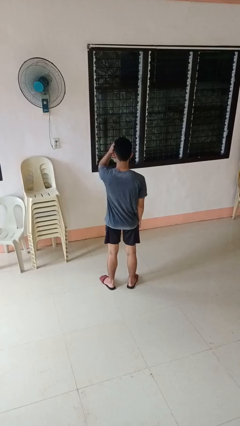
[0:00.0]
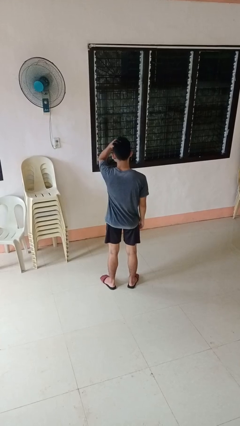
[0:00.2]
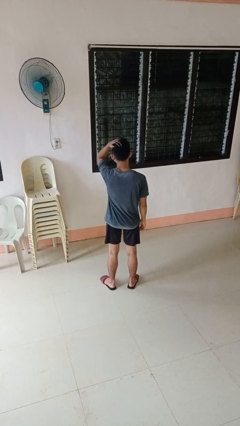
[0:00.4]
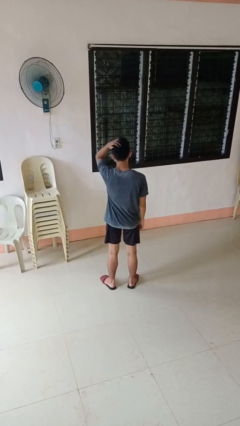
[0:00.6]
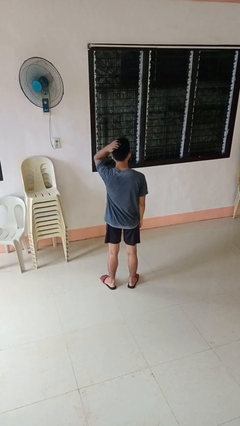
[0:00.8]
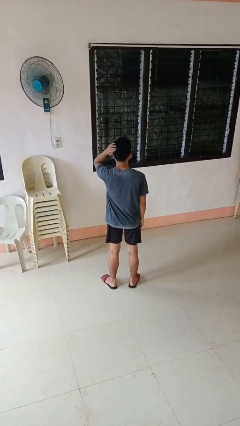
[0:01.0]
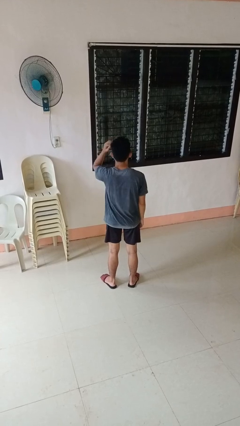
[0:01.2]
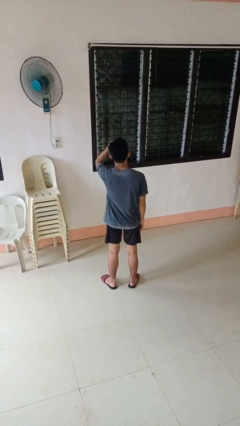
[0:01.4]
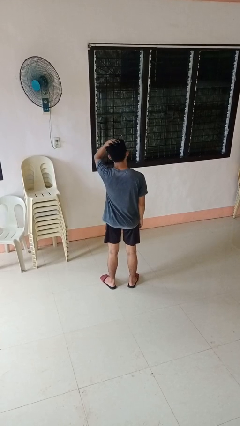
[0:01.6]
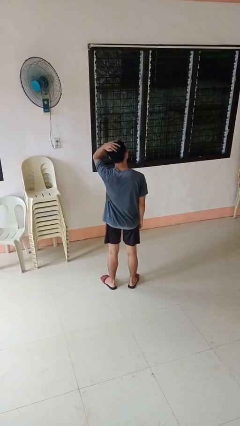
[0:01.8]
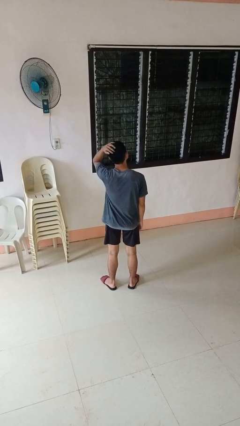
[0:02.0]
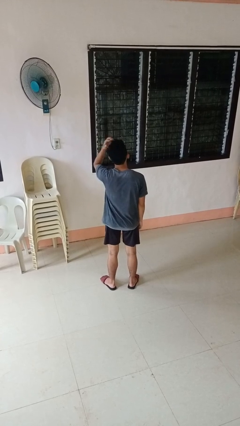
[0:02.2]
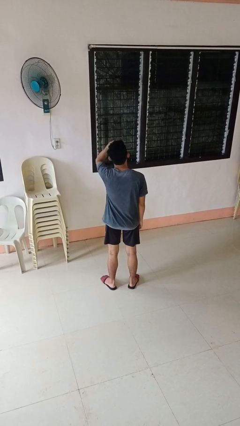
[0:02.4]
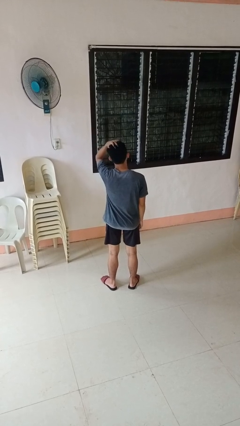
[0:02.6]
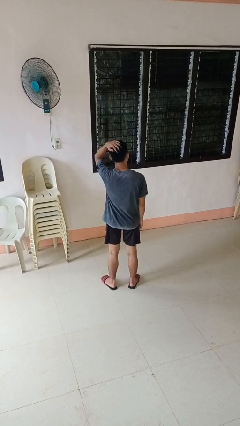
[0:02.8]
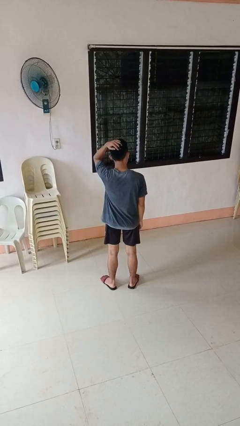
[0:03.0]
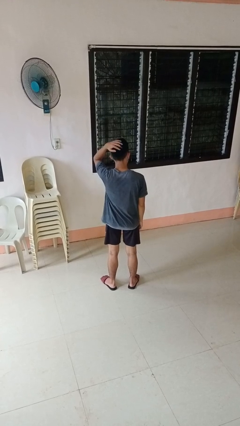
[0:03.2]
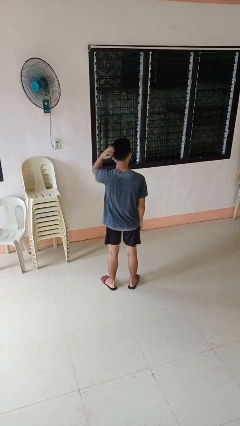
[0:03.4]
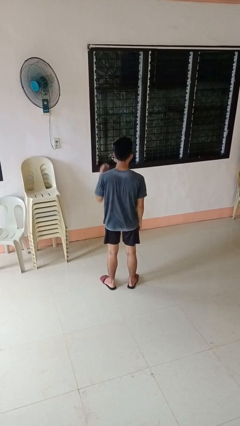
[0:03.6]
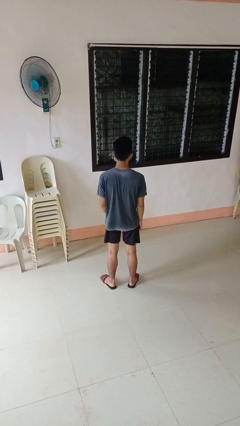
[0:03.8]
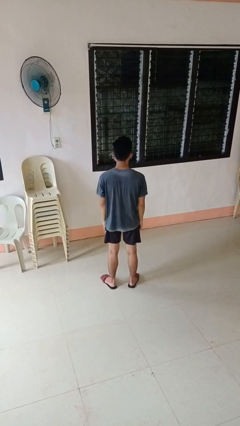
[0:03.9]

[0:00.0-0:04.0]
person strokes hair

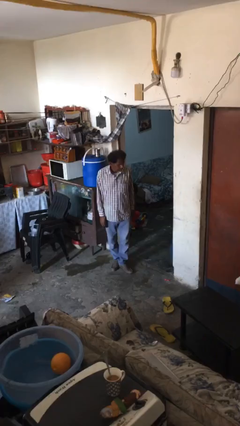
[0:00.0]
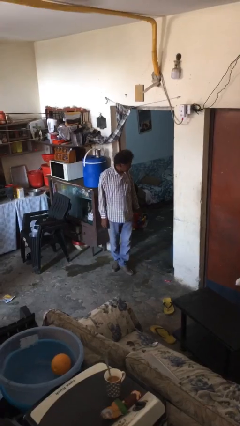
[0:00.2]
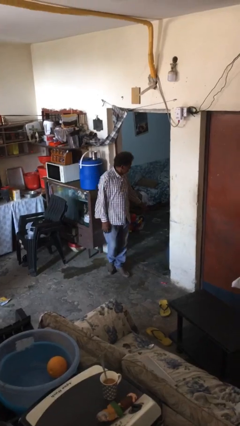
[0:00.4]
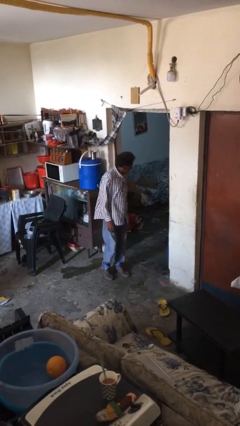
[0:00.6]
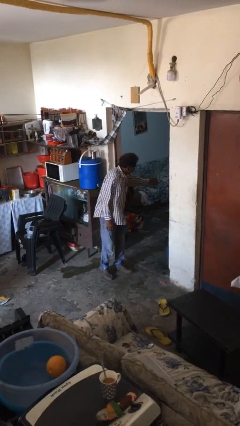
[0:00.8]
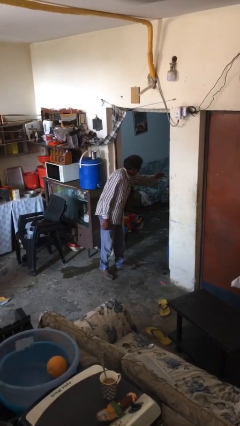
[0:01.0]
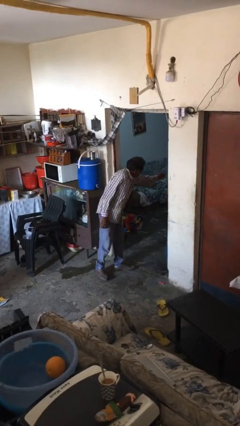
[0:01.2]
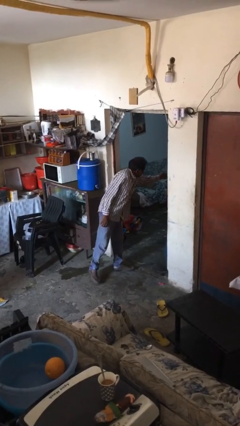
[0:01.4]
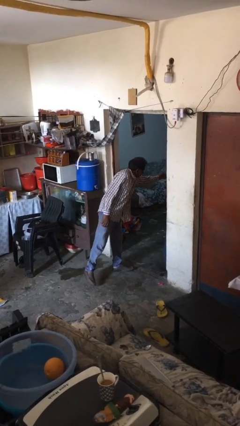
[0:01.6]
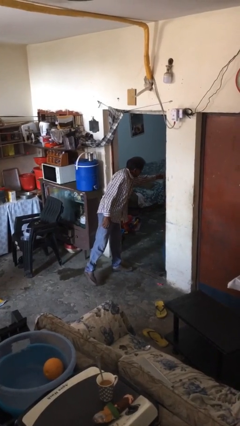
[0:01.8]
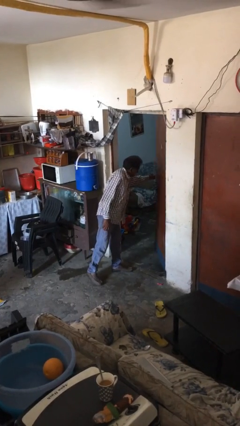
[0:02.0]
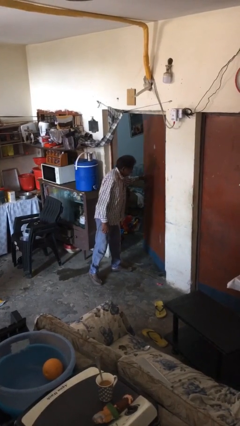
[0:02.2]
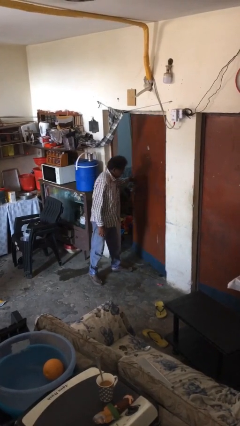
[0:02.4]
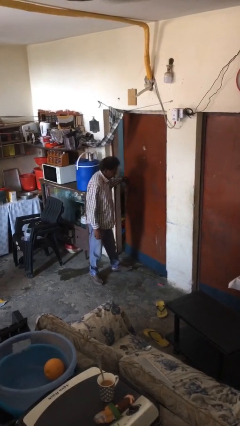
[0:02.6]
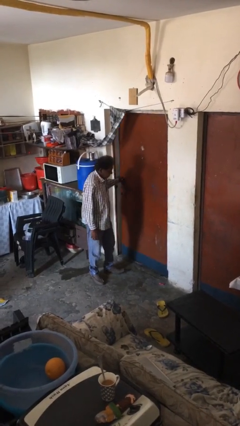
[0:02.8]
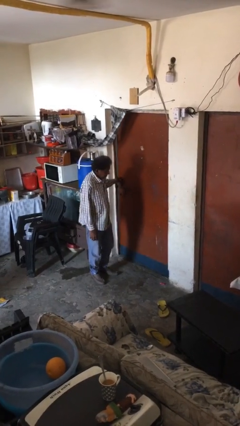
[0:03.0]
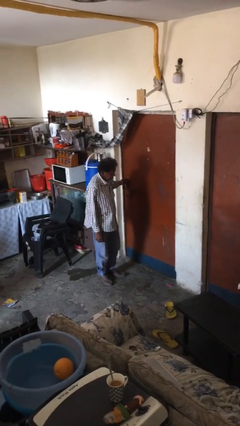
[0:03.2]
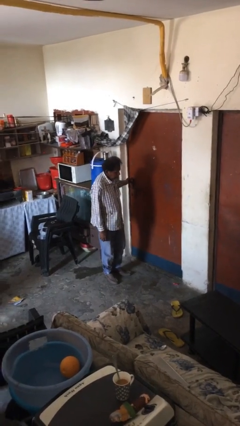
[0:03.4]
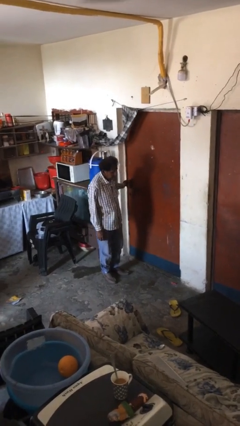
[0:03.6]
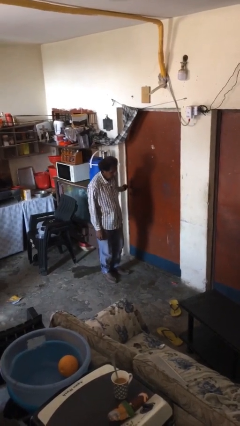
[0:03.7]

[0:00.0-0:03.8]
person closes facility door

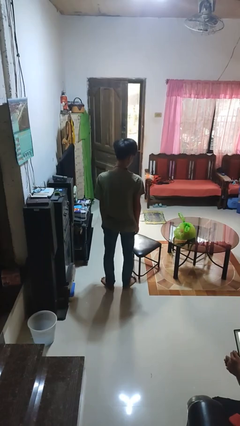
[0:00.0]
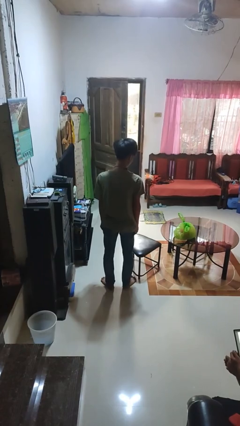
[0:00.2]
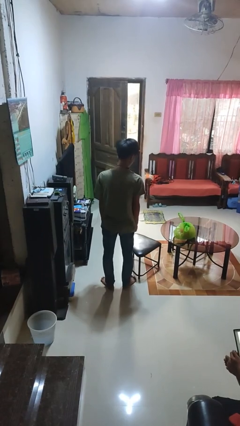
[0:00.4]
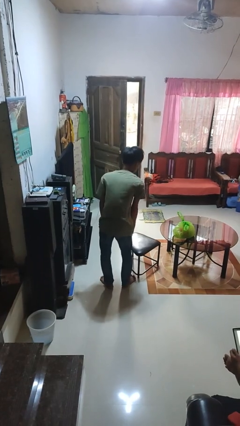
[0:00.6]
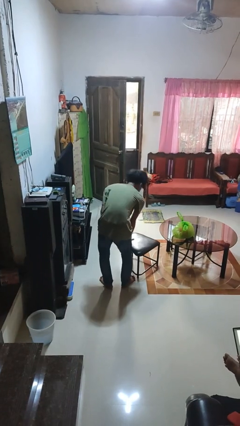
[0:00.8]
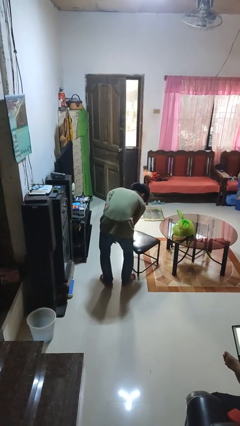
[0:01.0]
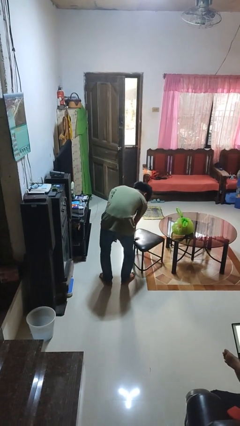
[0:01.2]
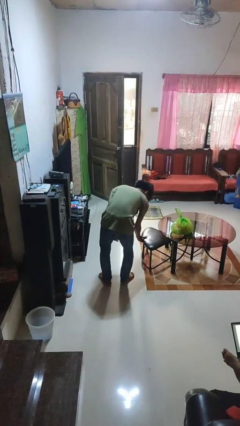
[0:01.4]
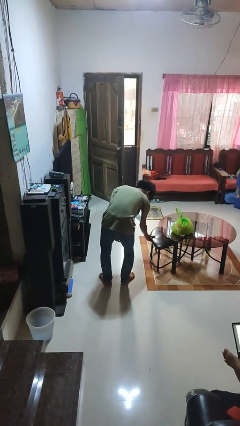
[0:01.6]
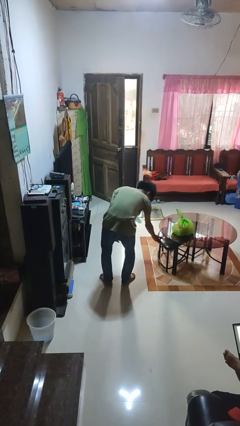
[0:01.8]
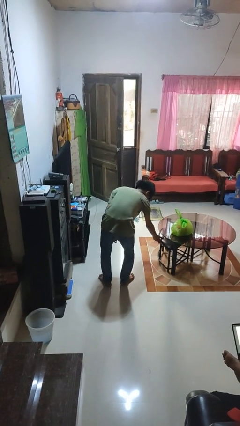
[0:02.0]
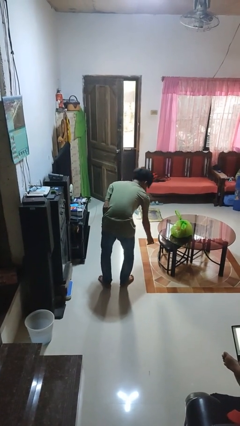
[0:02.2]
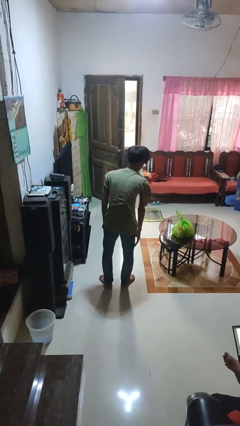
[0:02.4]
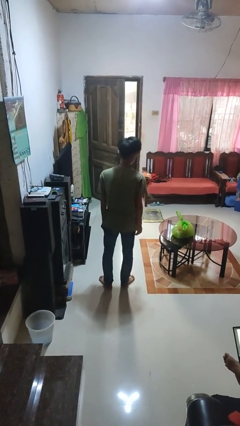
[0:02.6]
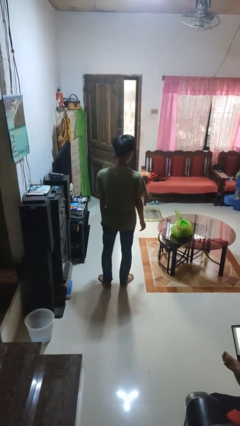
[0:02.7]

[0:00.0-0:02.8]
person pushes in chair

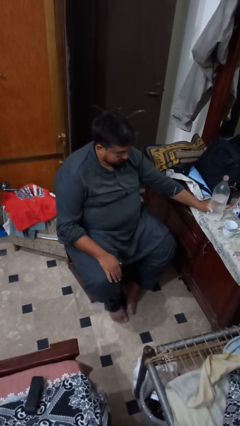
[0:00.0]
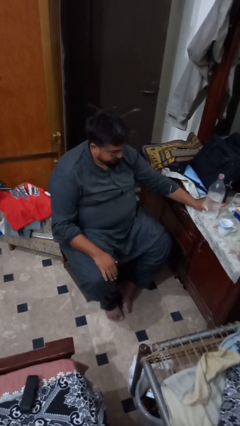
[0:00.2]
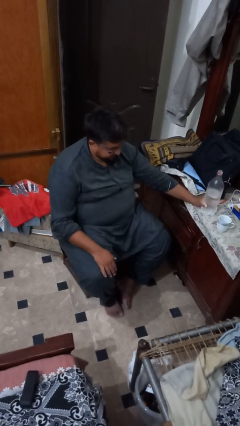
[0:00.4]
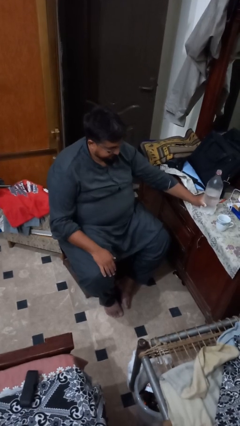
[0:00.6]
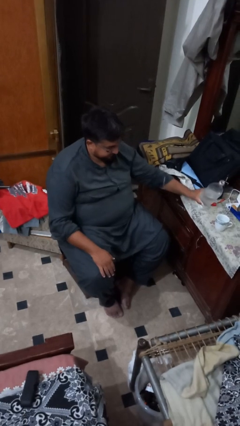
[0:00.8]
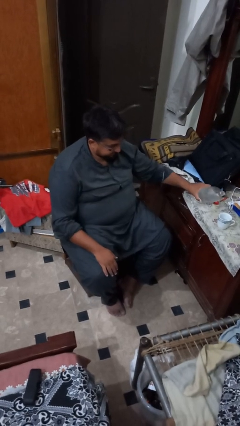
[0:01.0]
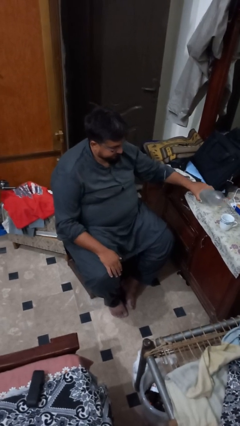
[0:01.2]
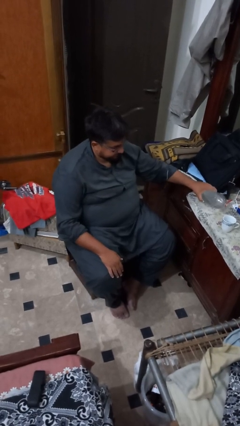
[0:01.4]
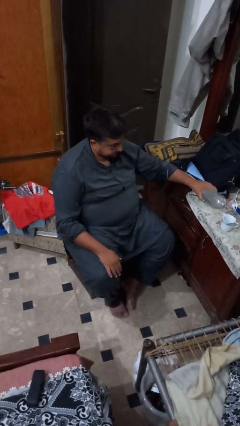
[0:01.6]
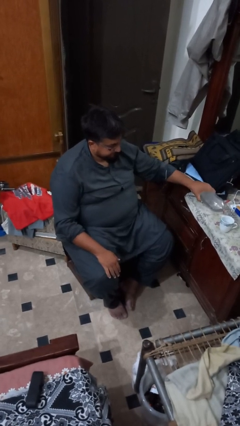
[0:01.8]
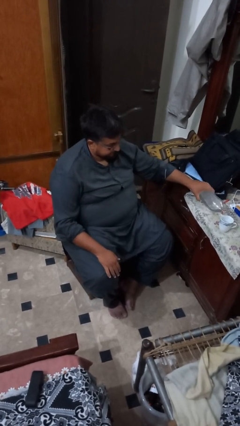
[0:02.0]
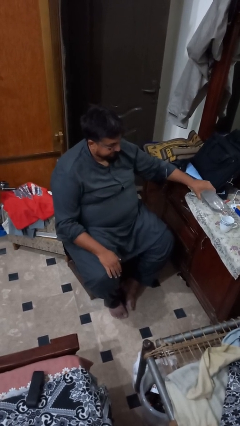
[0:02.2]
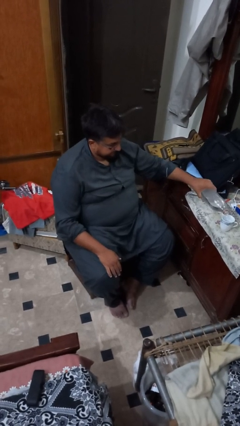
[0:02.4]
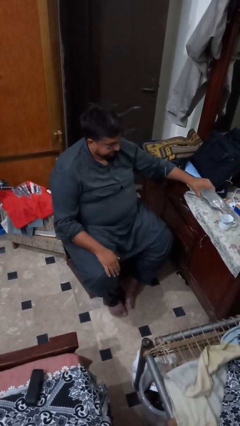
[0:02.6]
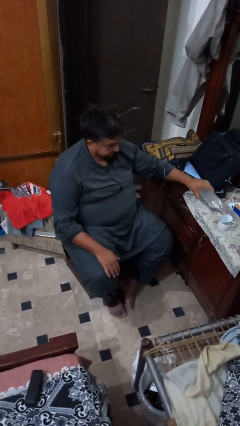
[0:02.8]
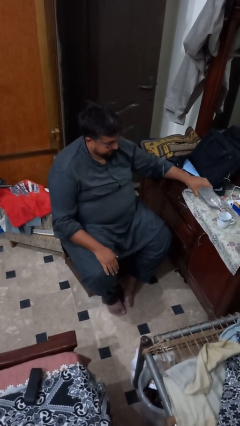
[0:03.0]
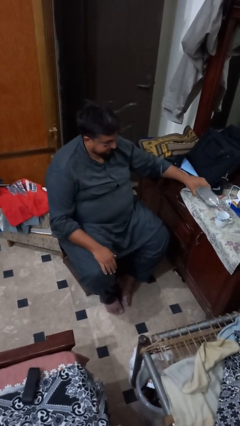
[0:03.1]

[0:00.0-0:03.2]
person pours liquid into cup

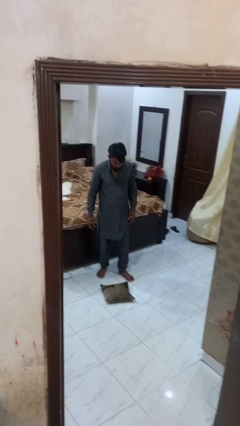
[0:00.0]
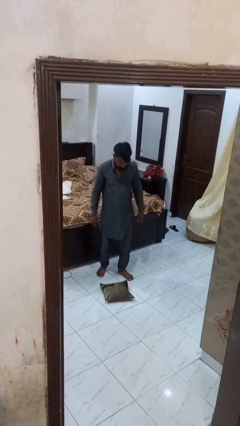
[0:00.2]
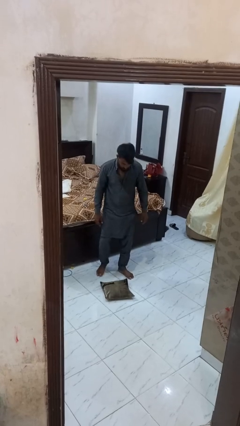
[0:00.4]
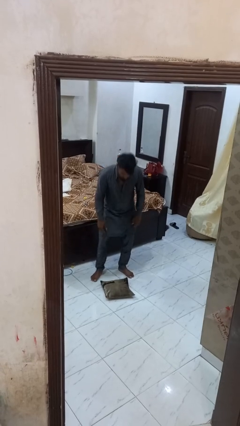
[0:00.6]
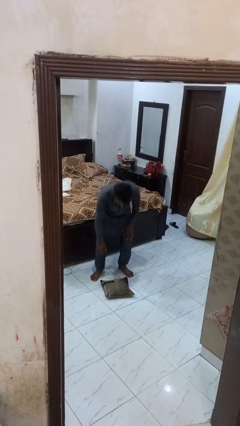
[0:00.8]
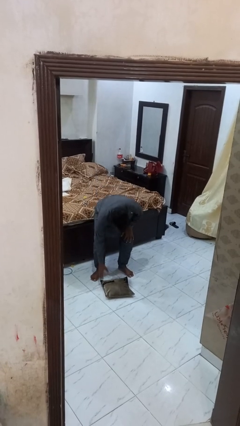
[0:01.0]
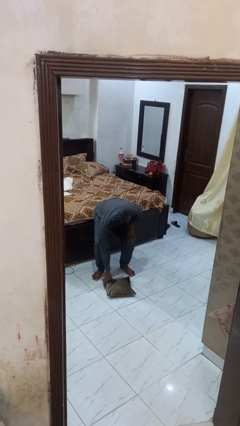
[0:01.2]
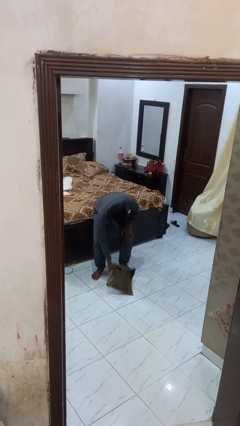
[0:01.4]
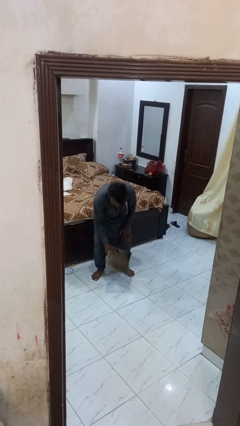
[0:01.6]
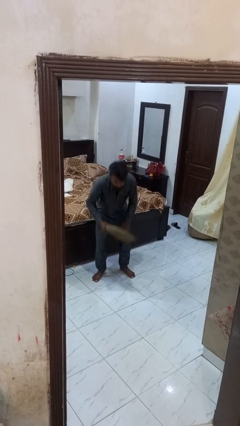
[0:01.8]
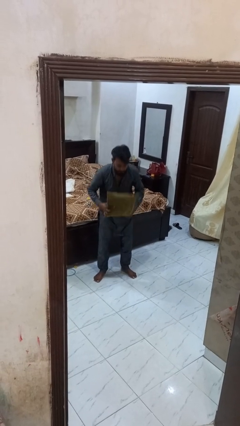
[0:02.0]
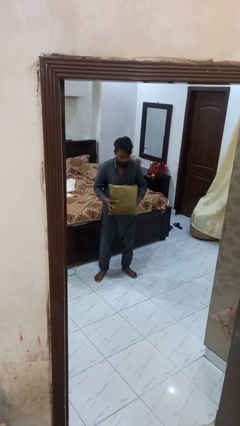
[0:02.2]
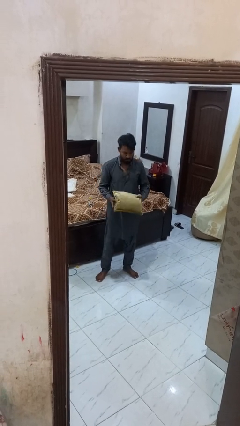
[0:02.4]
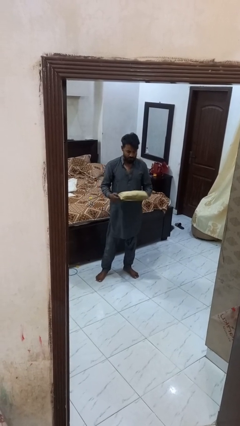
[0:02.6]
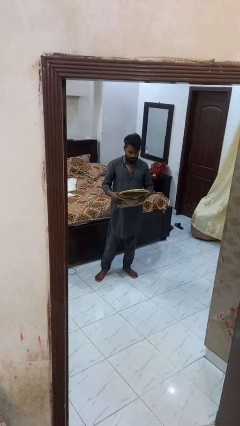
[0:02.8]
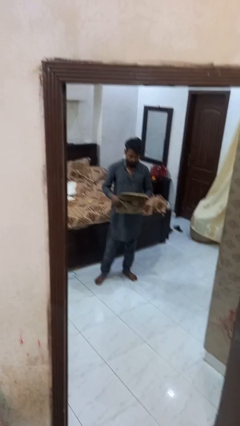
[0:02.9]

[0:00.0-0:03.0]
person picks up object from floor

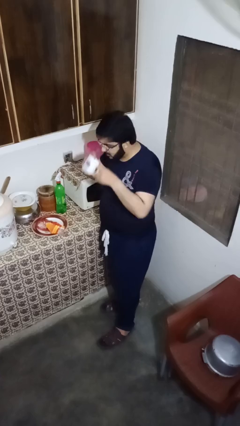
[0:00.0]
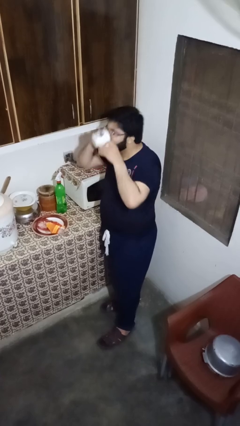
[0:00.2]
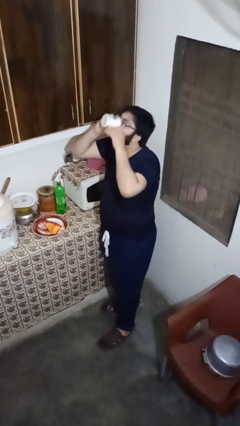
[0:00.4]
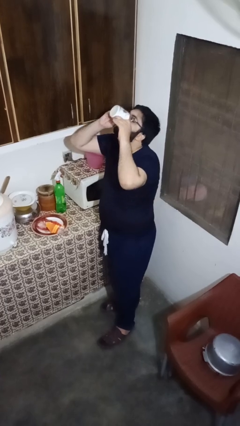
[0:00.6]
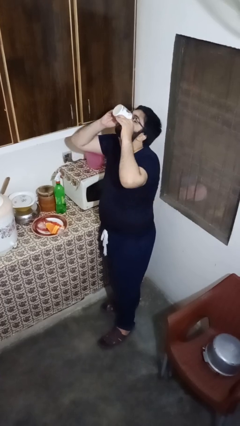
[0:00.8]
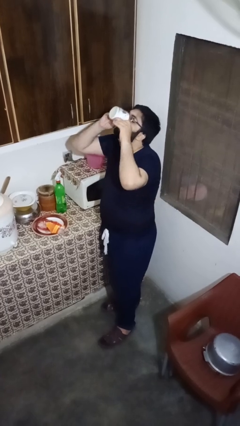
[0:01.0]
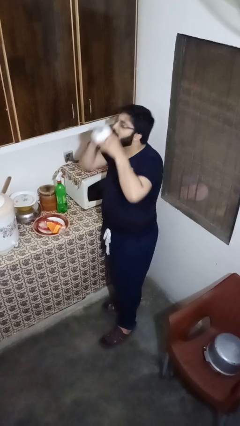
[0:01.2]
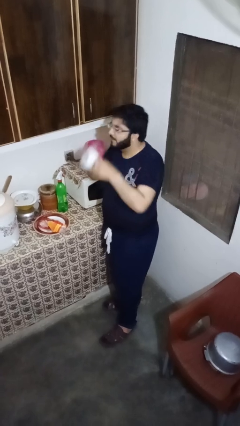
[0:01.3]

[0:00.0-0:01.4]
person drinks from mug
